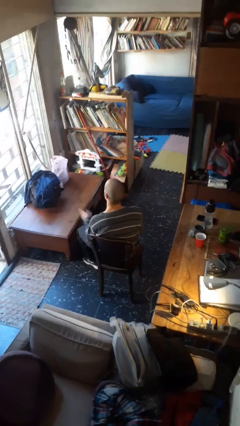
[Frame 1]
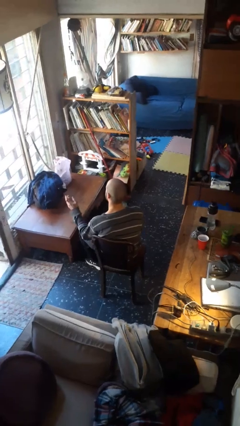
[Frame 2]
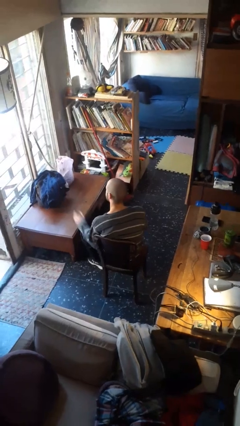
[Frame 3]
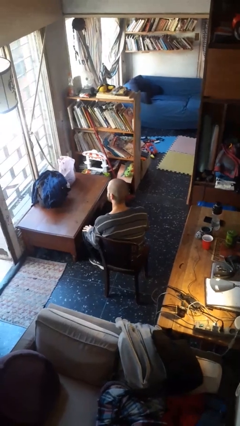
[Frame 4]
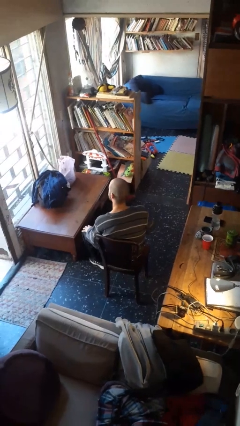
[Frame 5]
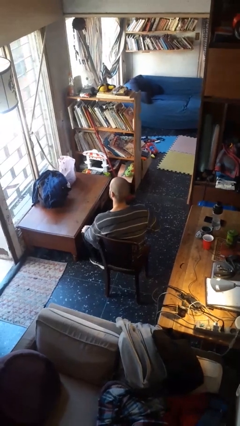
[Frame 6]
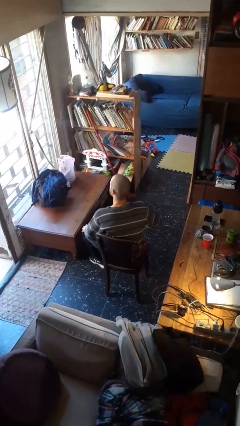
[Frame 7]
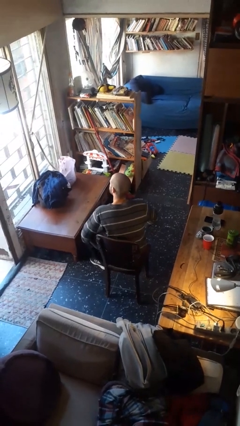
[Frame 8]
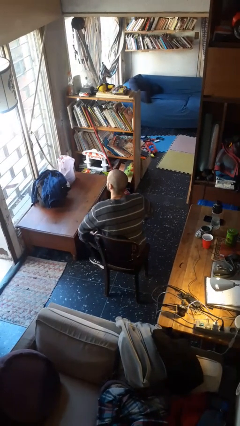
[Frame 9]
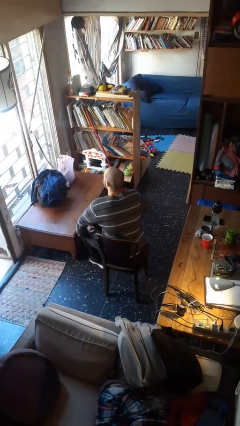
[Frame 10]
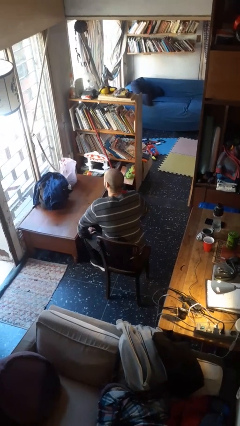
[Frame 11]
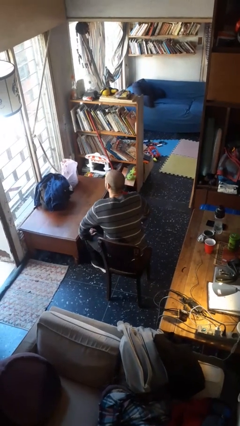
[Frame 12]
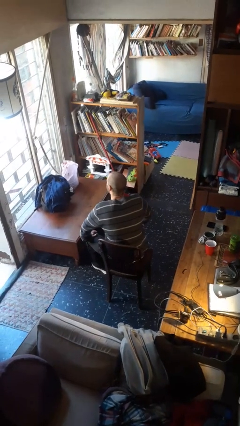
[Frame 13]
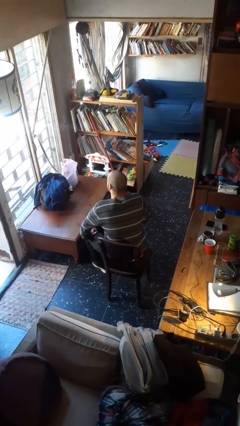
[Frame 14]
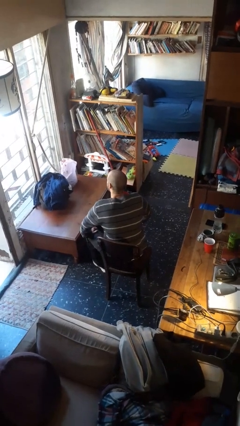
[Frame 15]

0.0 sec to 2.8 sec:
person slaps hands on thighs

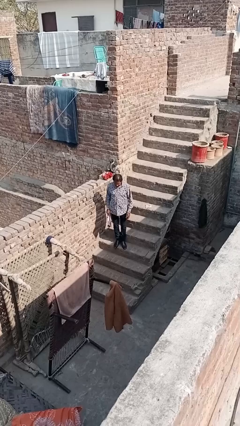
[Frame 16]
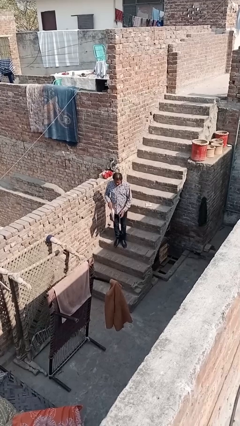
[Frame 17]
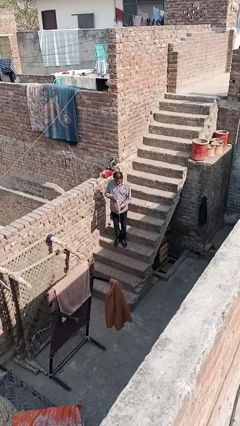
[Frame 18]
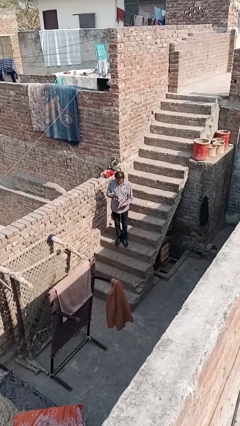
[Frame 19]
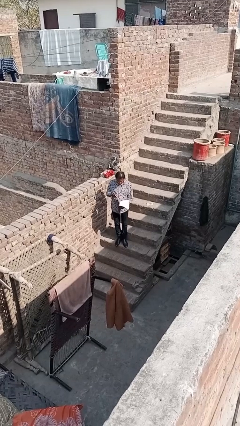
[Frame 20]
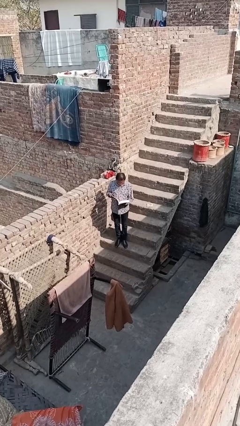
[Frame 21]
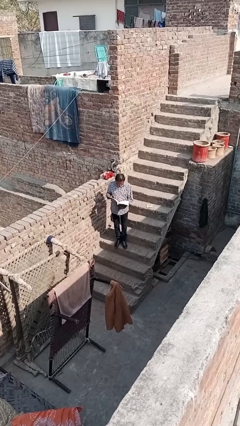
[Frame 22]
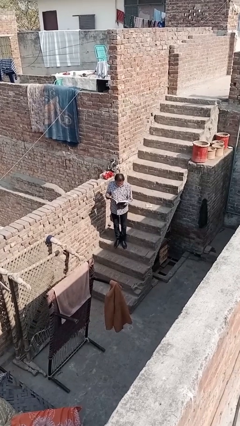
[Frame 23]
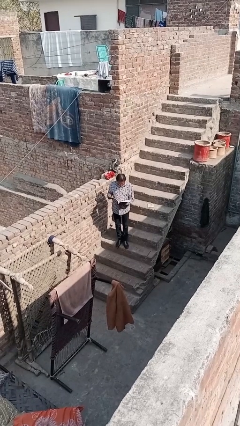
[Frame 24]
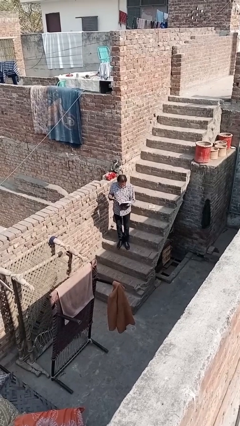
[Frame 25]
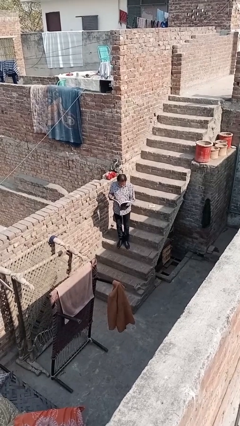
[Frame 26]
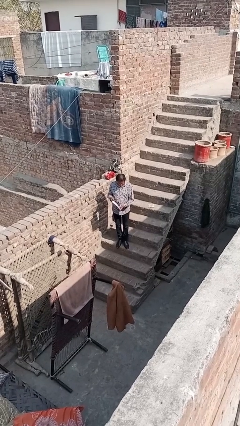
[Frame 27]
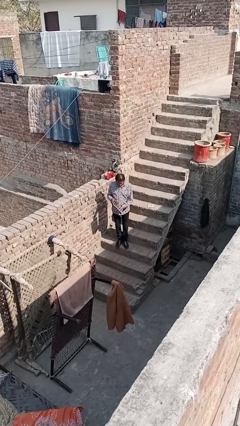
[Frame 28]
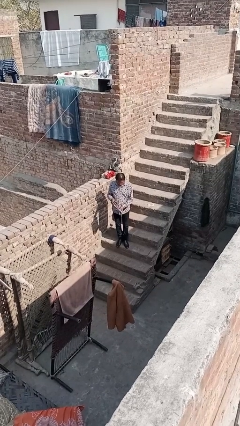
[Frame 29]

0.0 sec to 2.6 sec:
person reads document

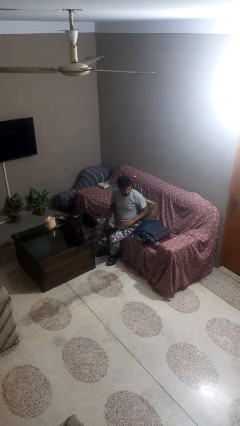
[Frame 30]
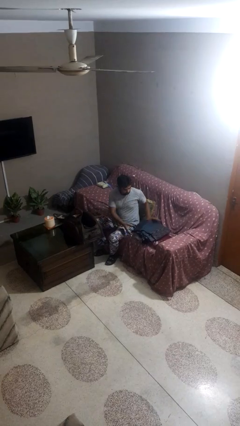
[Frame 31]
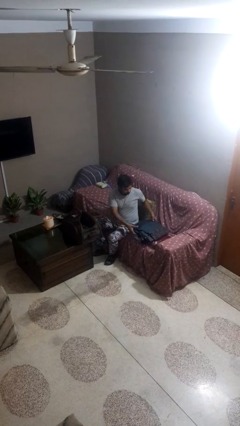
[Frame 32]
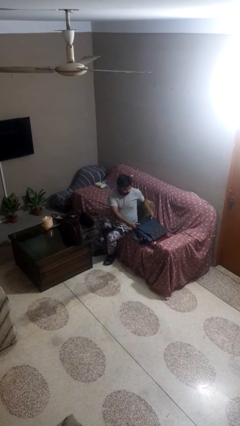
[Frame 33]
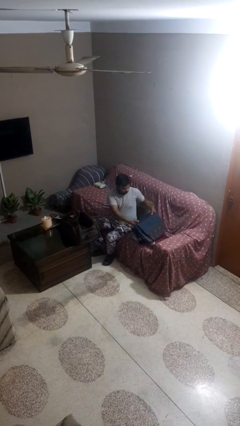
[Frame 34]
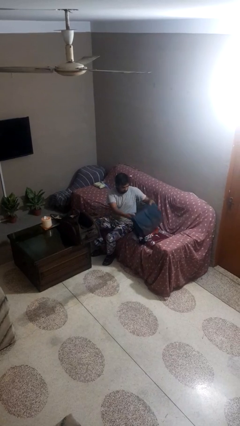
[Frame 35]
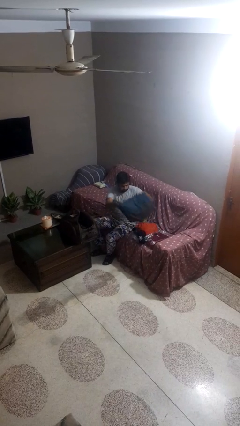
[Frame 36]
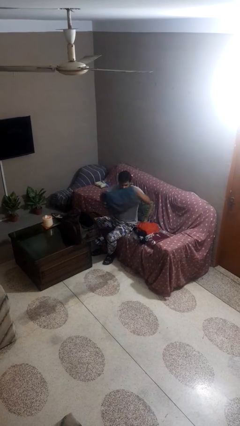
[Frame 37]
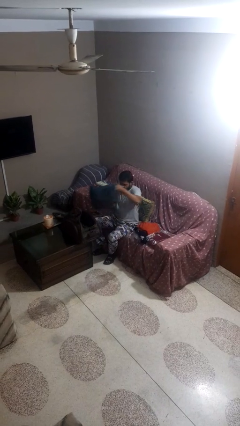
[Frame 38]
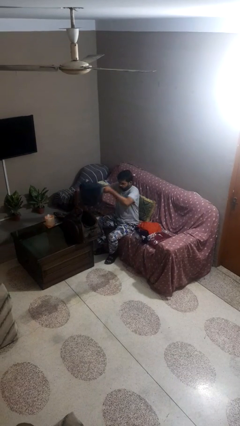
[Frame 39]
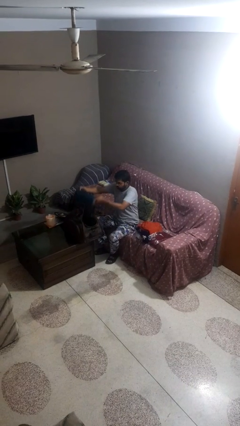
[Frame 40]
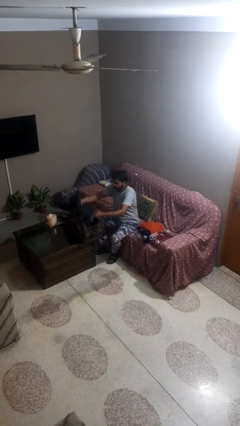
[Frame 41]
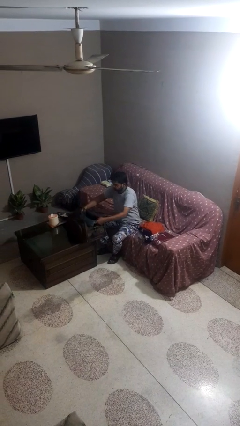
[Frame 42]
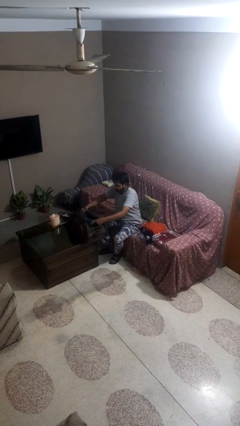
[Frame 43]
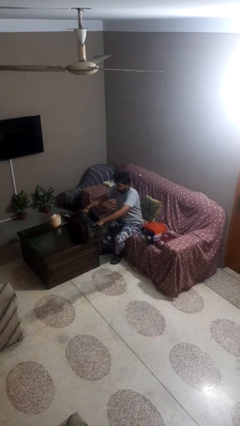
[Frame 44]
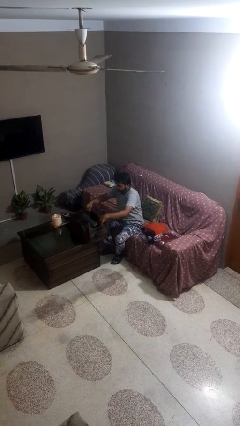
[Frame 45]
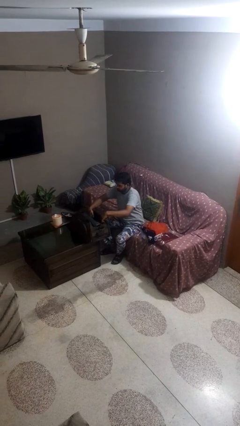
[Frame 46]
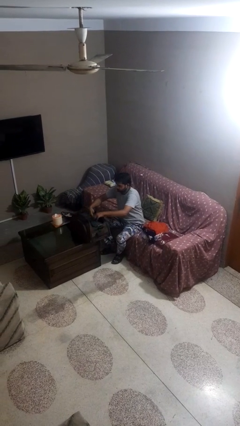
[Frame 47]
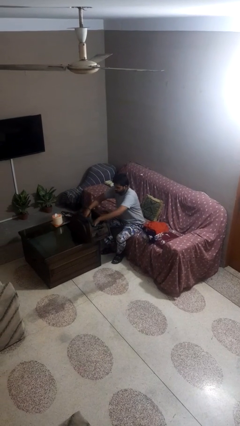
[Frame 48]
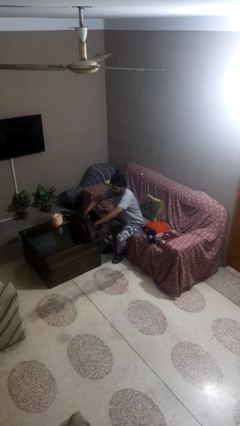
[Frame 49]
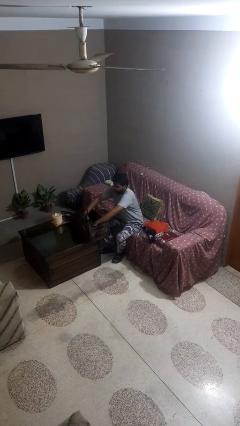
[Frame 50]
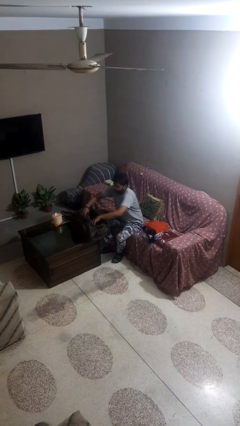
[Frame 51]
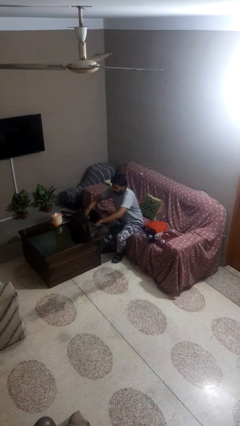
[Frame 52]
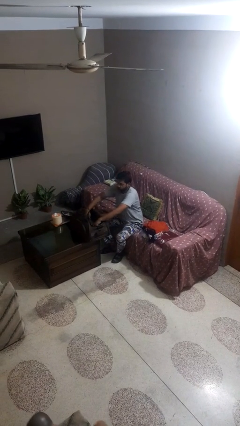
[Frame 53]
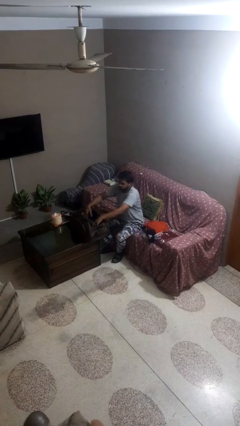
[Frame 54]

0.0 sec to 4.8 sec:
person loads clothes into suitcase

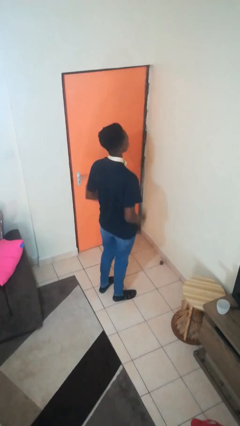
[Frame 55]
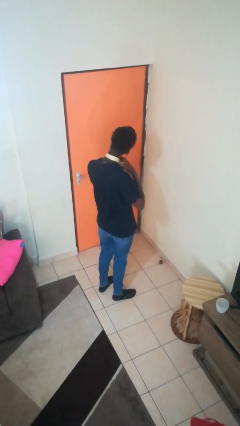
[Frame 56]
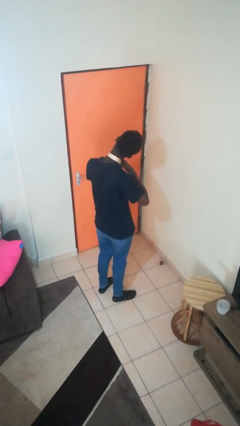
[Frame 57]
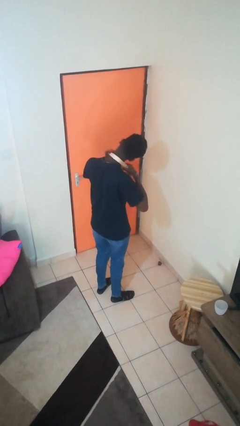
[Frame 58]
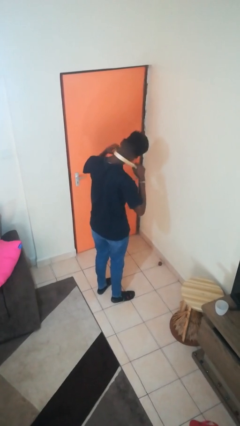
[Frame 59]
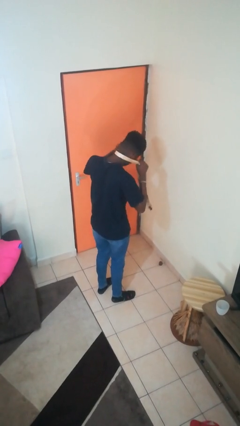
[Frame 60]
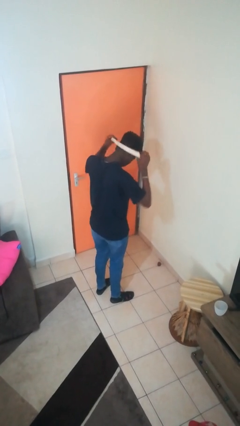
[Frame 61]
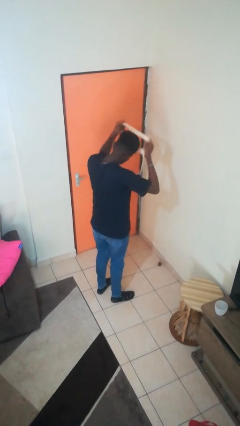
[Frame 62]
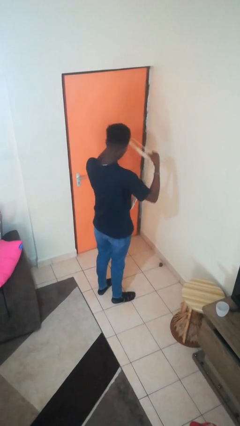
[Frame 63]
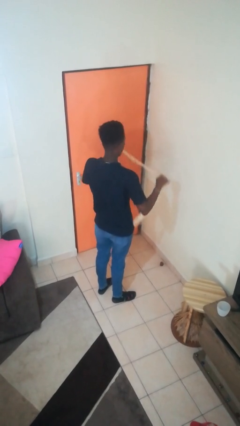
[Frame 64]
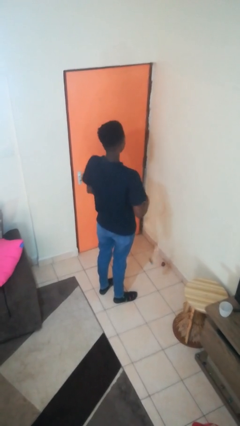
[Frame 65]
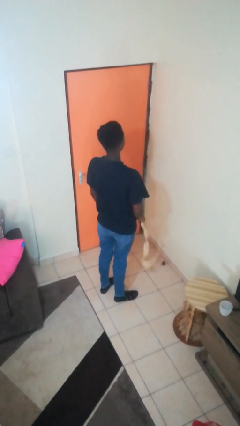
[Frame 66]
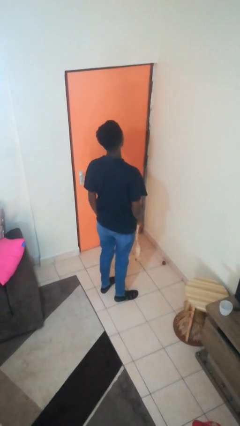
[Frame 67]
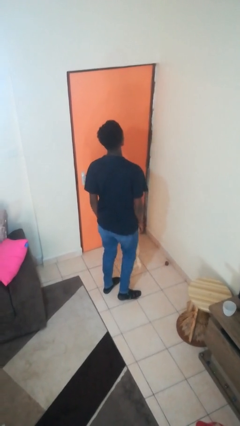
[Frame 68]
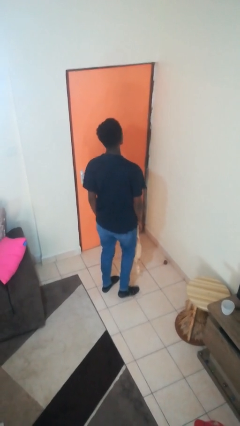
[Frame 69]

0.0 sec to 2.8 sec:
person takes off necktie

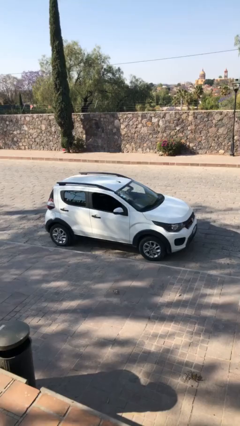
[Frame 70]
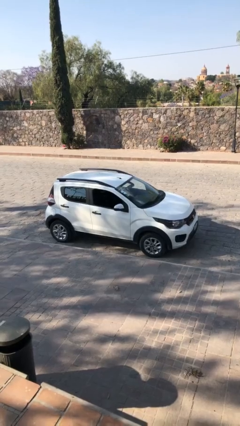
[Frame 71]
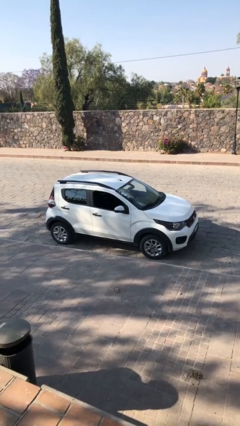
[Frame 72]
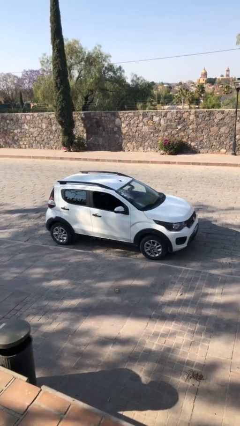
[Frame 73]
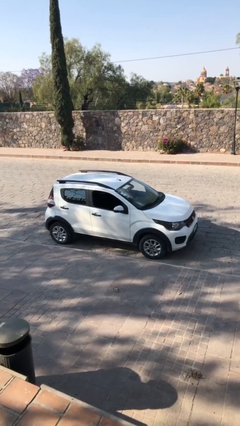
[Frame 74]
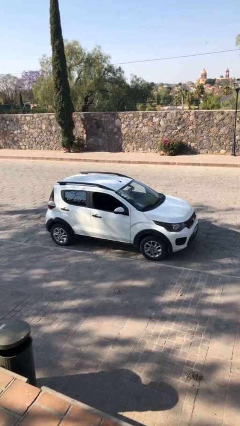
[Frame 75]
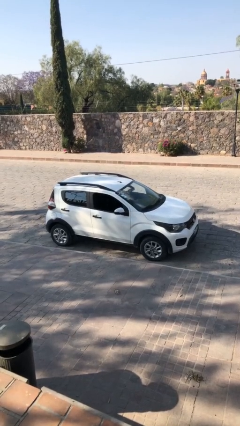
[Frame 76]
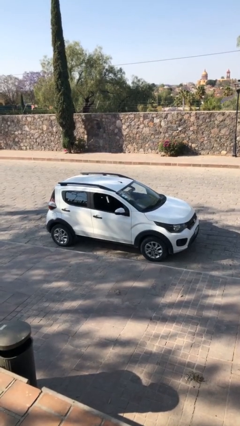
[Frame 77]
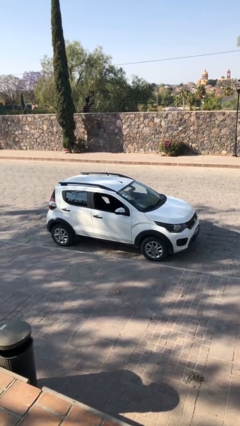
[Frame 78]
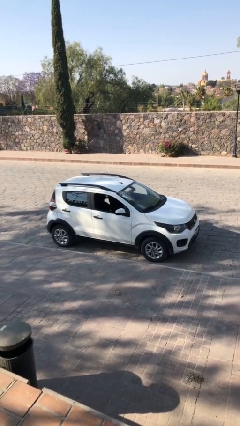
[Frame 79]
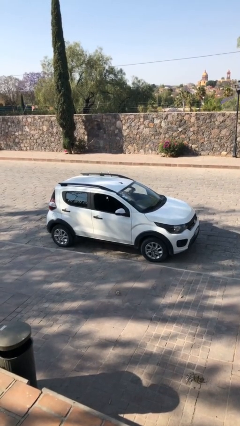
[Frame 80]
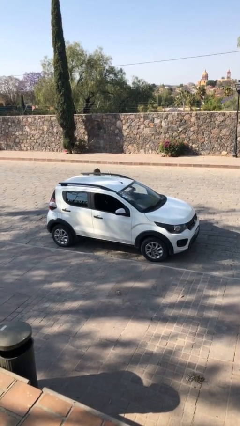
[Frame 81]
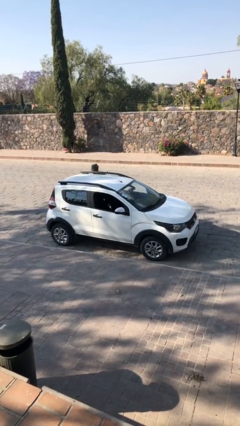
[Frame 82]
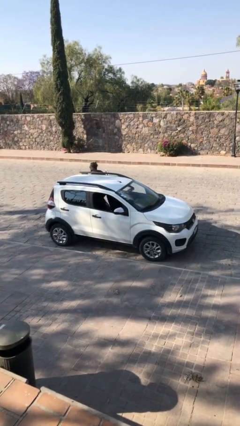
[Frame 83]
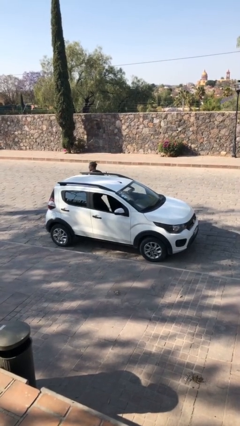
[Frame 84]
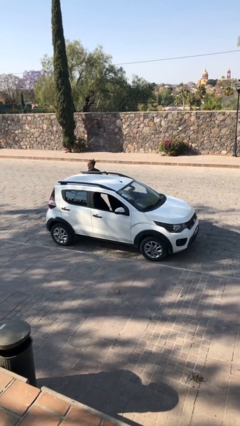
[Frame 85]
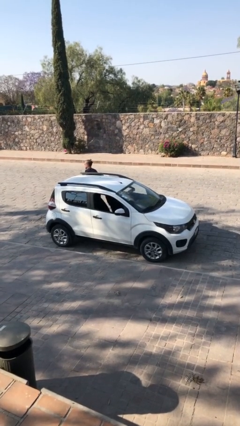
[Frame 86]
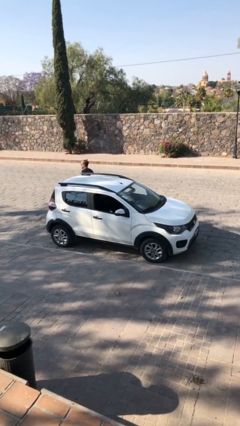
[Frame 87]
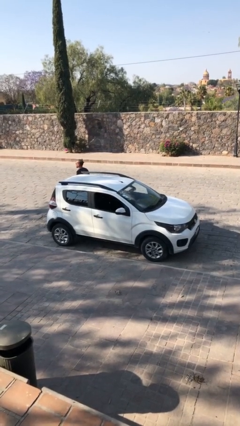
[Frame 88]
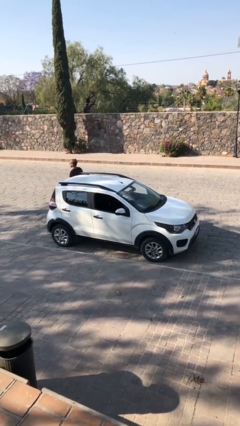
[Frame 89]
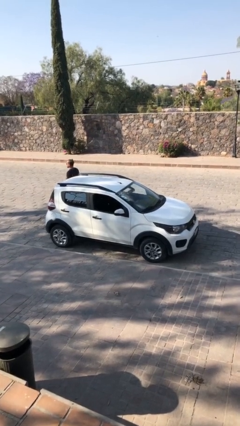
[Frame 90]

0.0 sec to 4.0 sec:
car drops off person

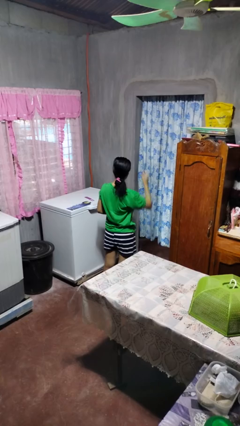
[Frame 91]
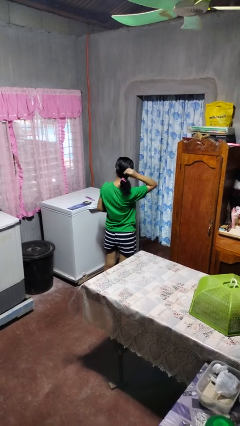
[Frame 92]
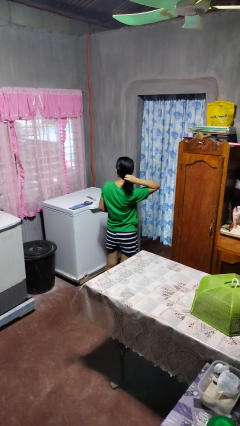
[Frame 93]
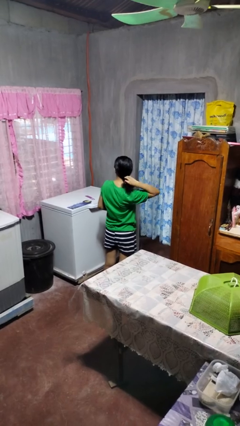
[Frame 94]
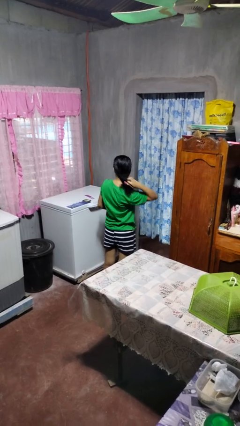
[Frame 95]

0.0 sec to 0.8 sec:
person takes off hairtie
